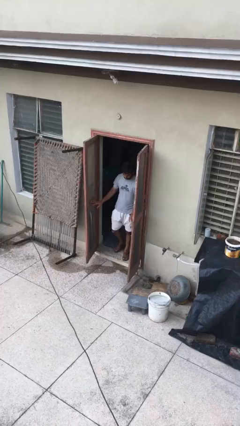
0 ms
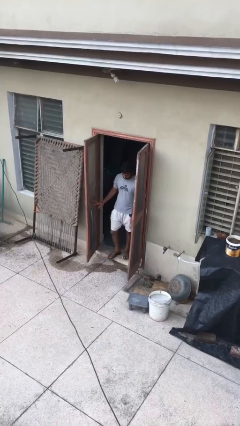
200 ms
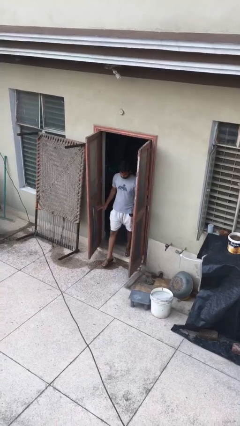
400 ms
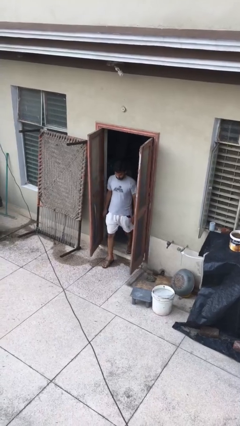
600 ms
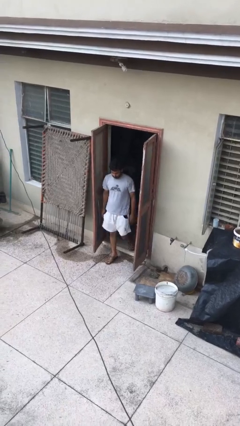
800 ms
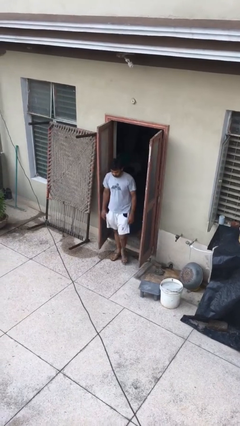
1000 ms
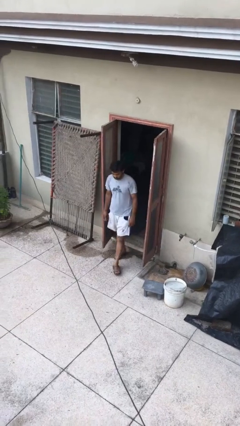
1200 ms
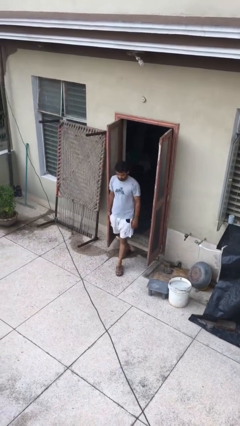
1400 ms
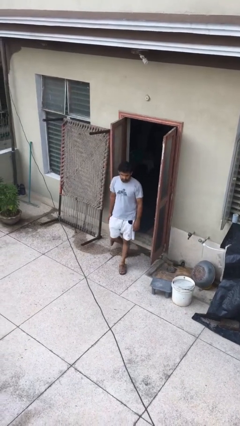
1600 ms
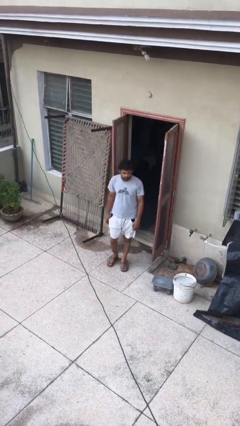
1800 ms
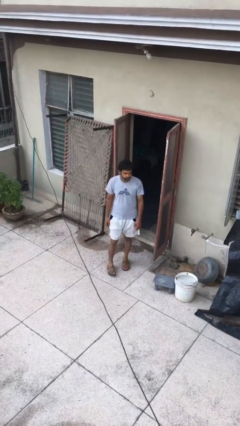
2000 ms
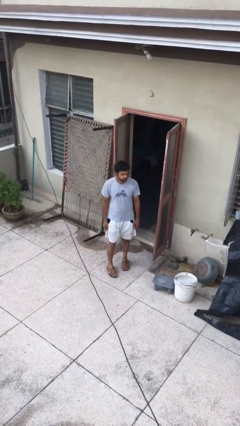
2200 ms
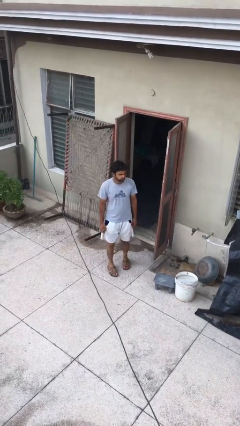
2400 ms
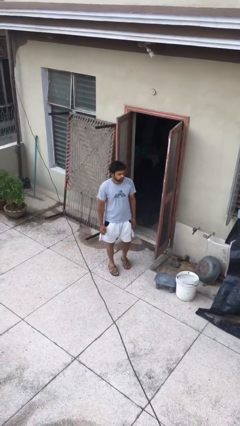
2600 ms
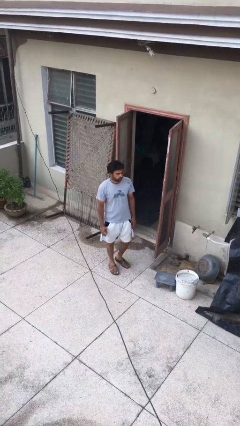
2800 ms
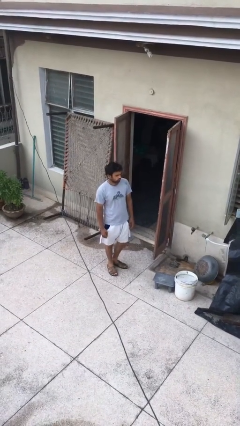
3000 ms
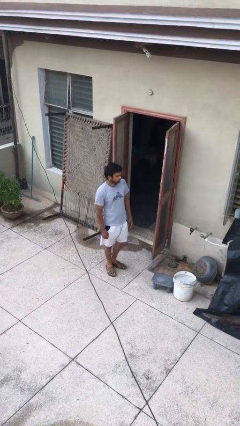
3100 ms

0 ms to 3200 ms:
person enters scene through structure

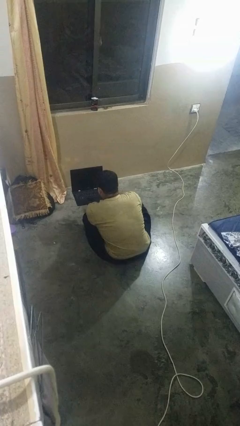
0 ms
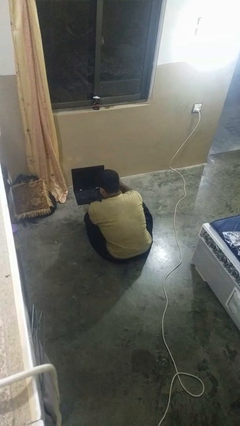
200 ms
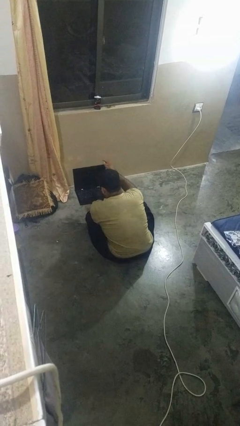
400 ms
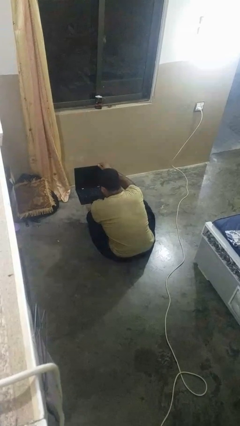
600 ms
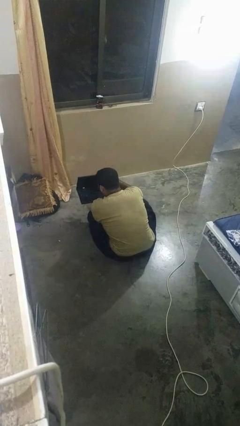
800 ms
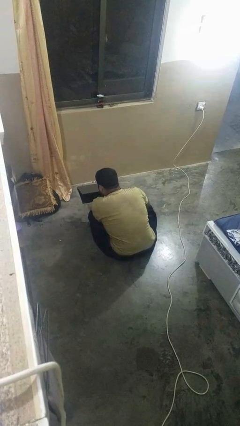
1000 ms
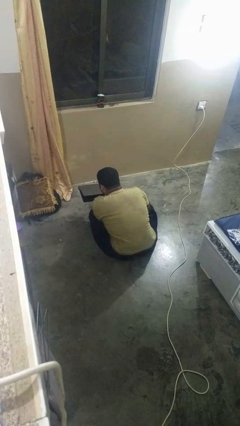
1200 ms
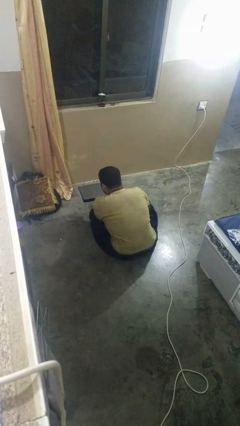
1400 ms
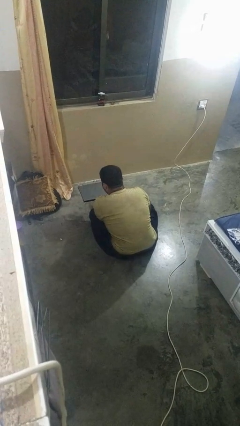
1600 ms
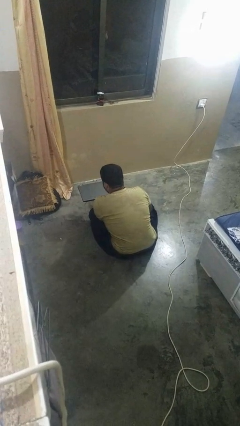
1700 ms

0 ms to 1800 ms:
person closes laptop

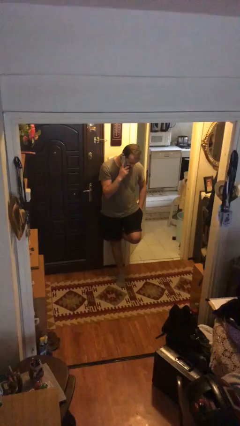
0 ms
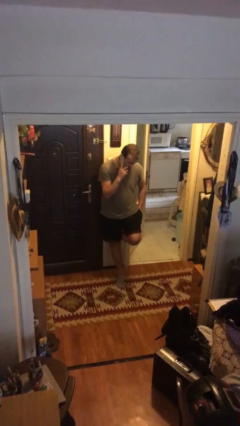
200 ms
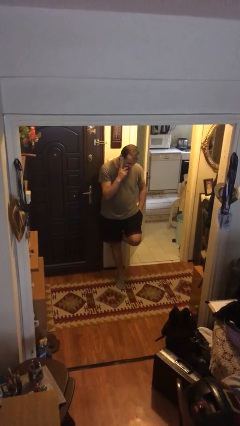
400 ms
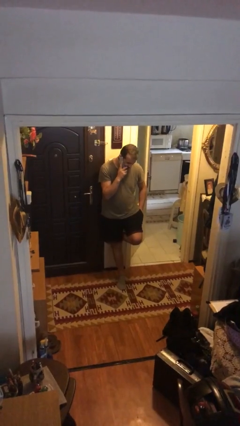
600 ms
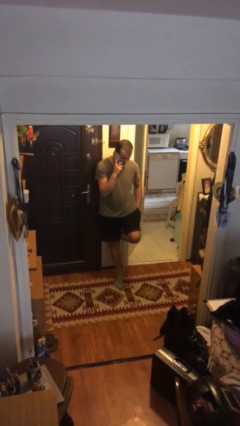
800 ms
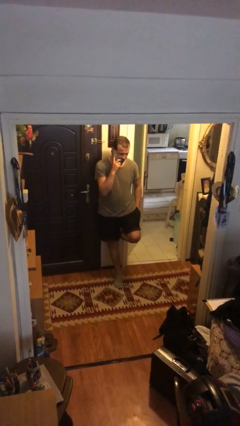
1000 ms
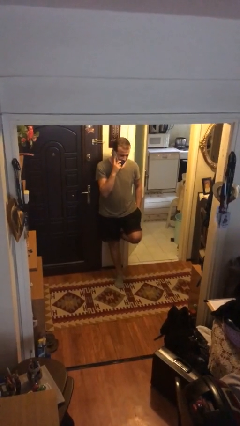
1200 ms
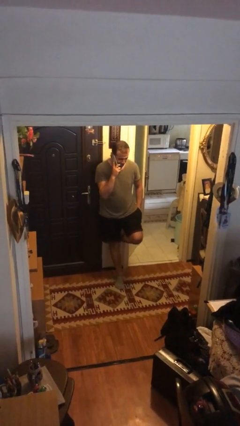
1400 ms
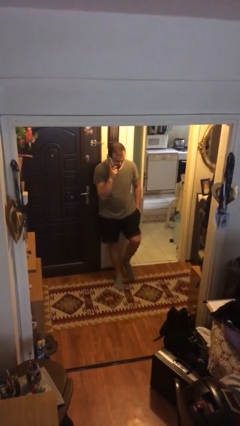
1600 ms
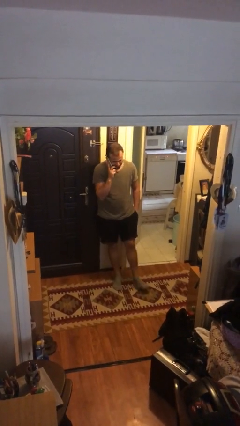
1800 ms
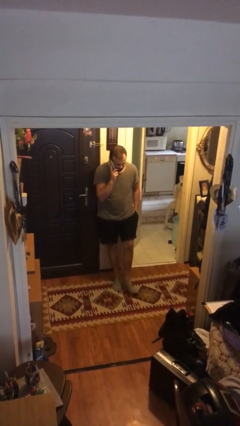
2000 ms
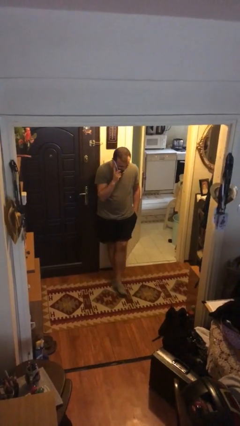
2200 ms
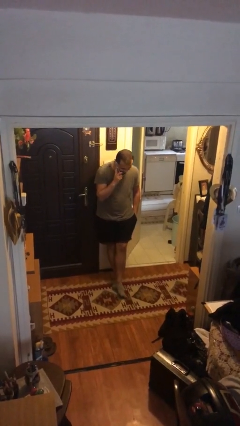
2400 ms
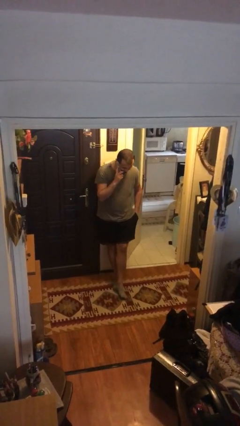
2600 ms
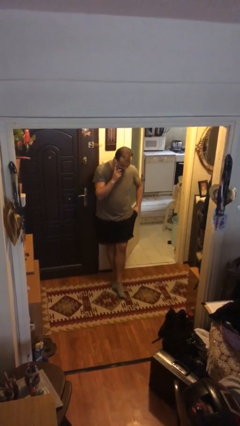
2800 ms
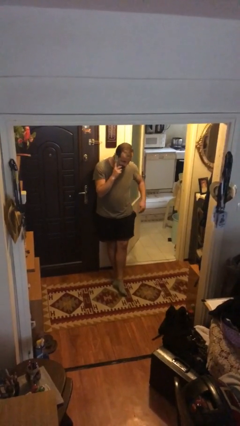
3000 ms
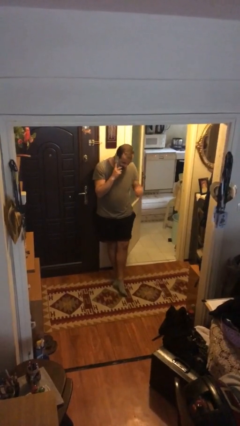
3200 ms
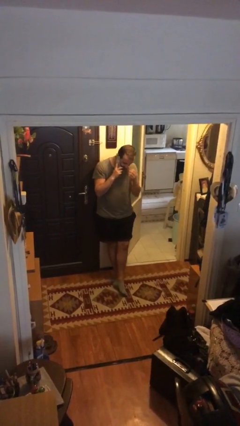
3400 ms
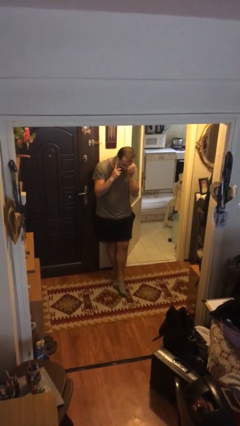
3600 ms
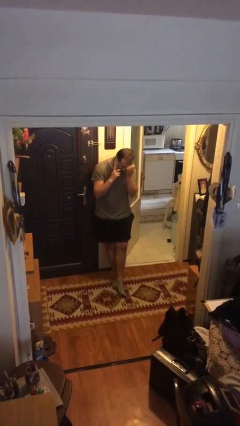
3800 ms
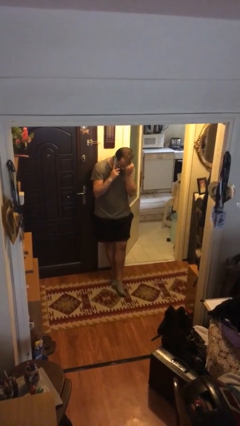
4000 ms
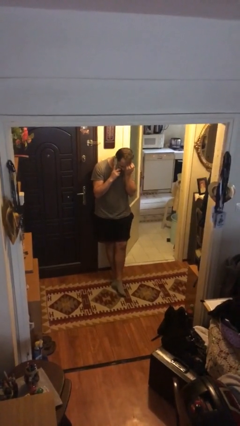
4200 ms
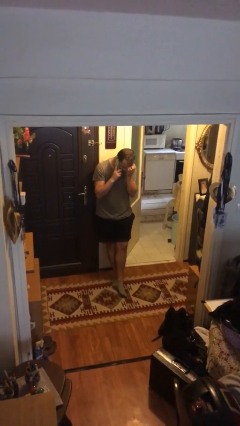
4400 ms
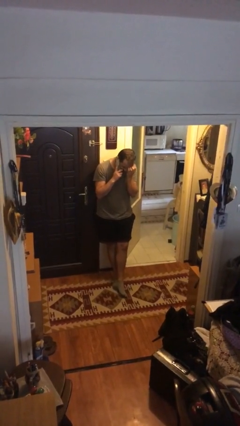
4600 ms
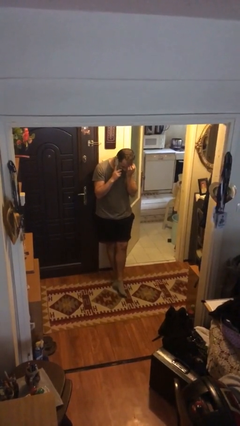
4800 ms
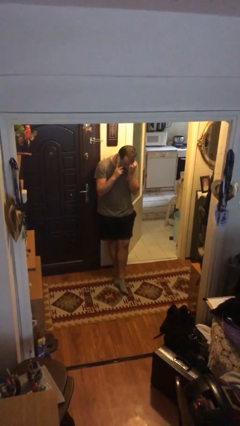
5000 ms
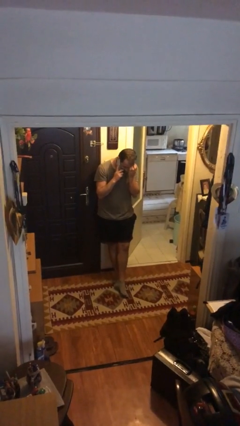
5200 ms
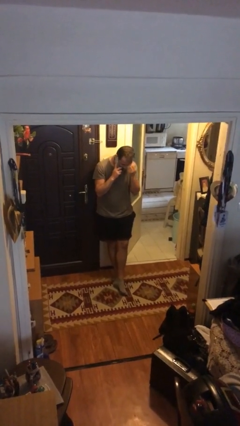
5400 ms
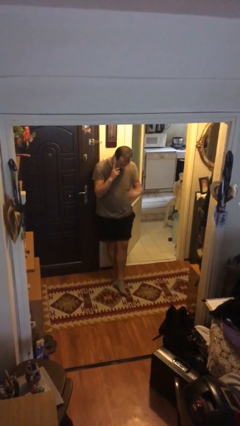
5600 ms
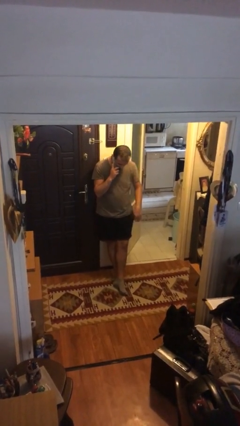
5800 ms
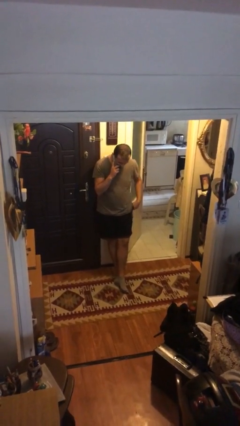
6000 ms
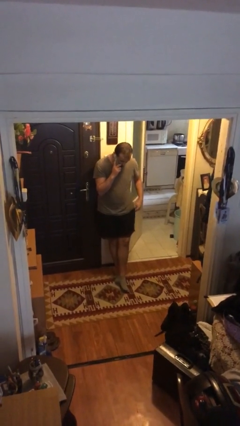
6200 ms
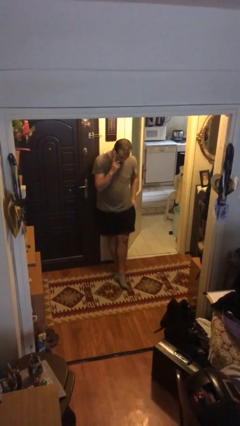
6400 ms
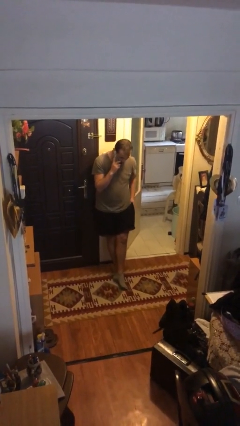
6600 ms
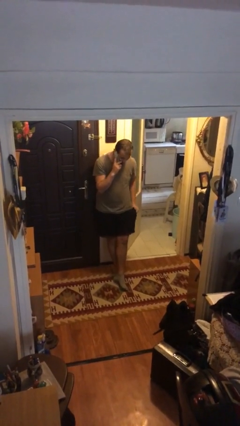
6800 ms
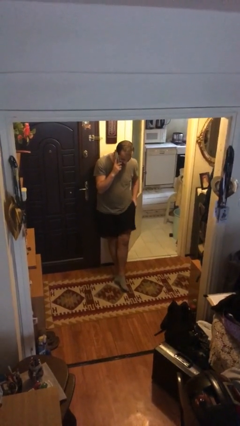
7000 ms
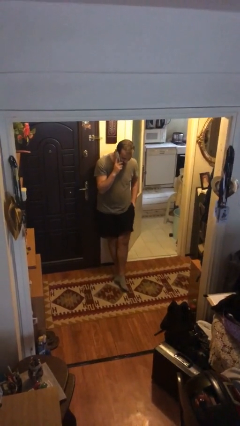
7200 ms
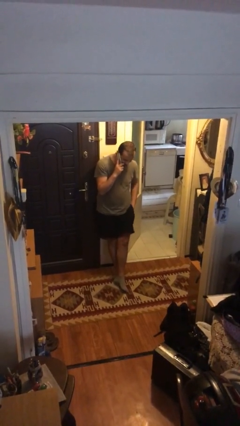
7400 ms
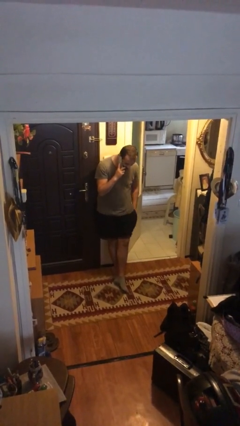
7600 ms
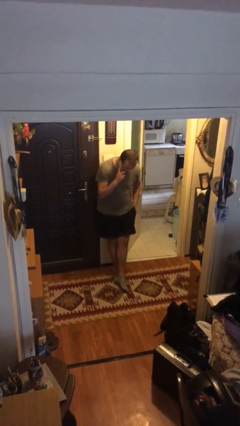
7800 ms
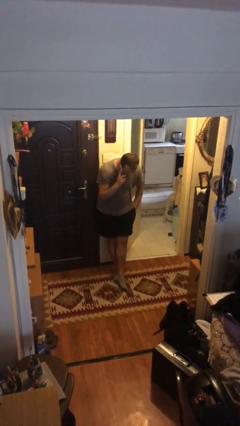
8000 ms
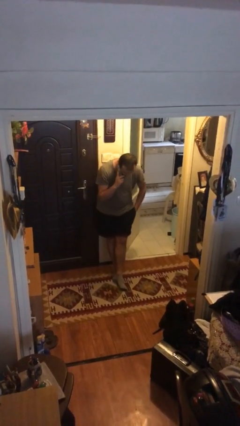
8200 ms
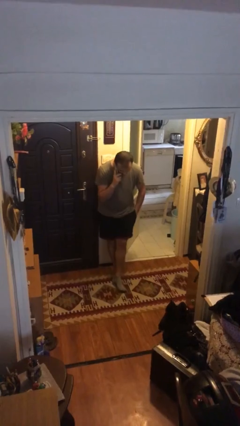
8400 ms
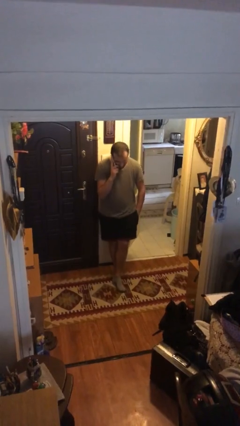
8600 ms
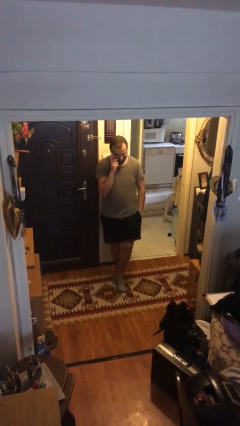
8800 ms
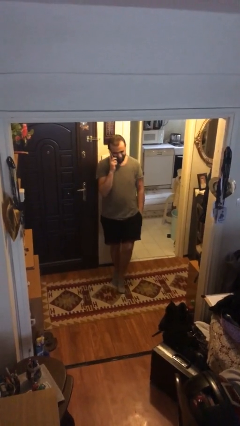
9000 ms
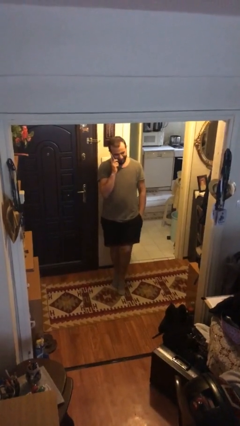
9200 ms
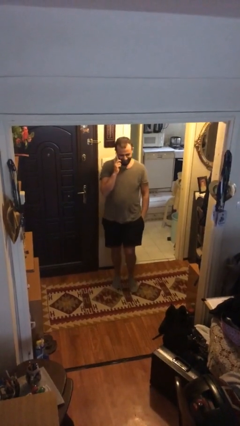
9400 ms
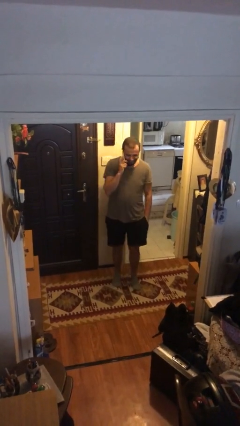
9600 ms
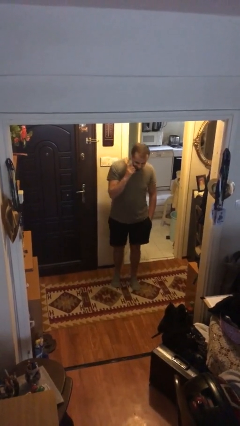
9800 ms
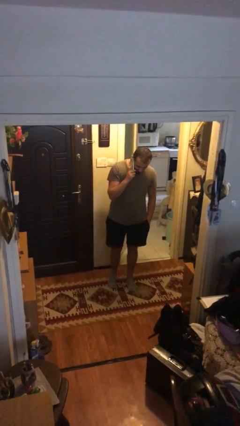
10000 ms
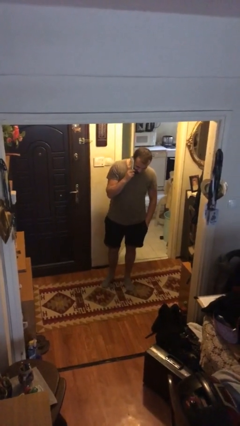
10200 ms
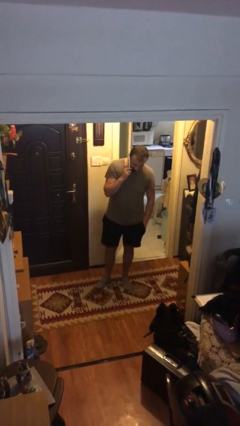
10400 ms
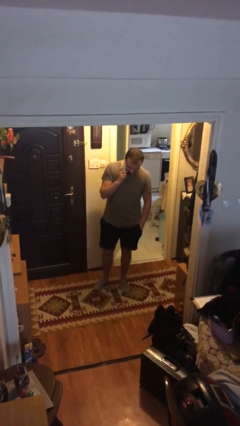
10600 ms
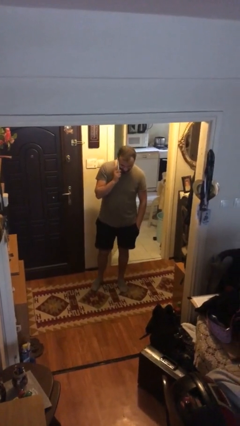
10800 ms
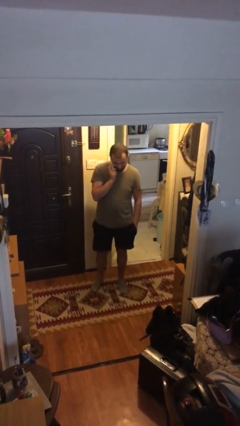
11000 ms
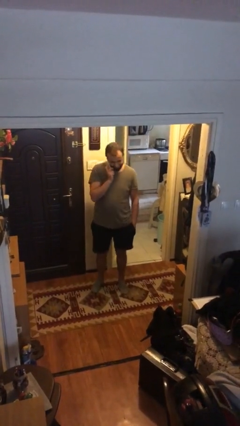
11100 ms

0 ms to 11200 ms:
person talks on phone

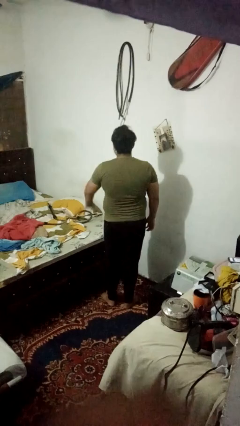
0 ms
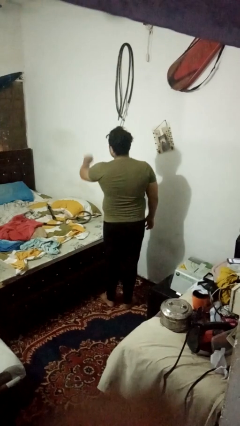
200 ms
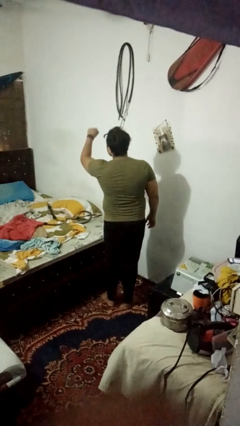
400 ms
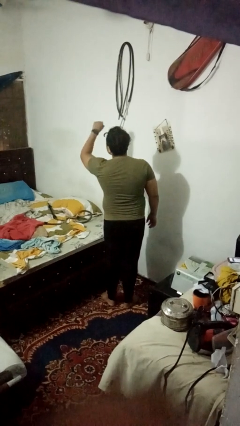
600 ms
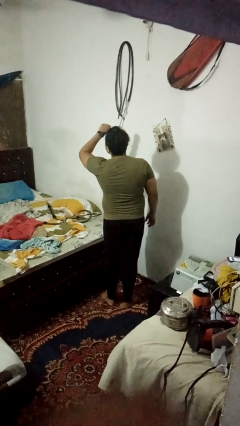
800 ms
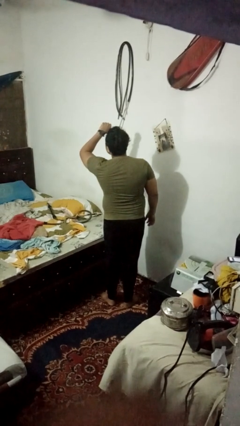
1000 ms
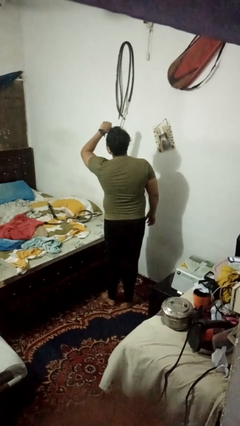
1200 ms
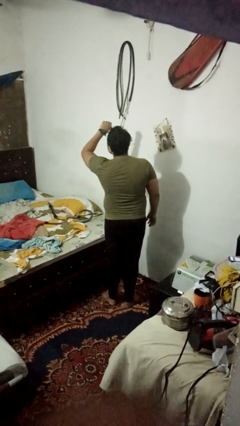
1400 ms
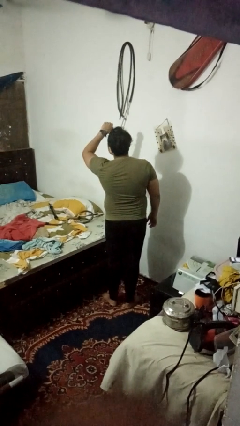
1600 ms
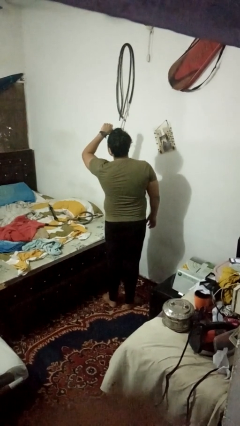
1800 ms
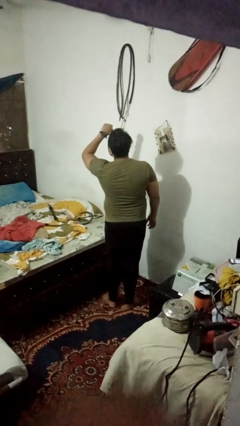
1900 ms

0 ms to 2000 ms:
person gestures watch closely
